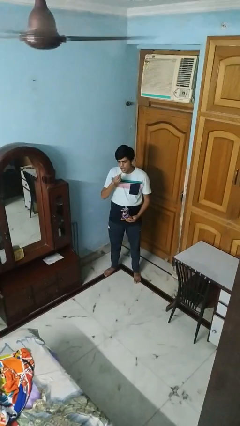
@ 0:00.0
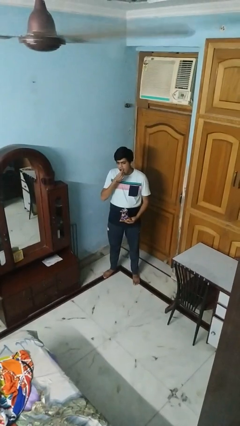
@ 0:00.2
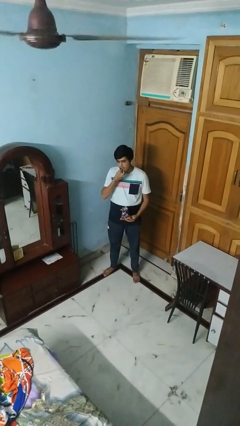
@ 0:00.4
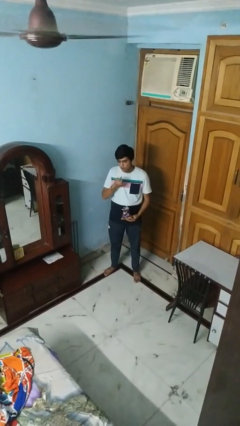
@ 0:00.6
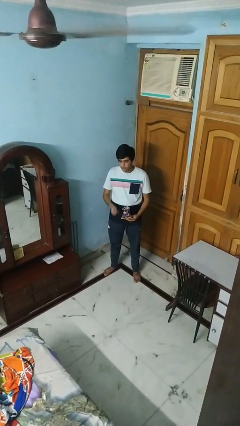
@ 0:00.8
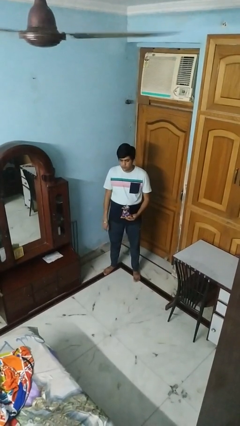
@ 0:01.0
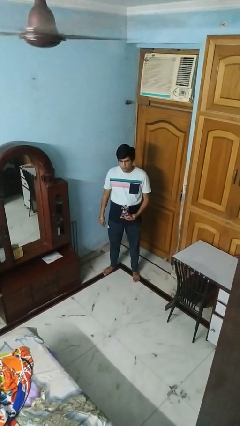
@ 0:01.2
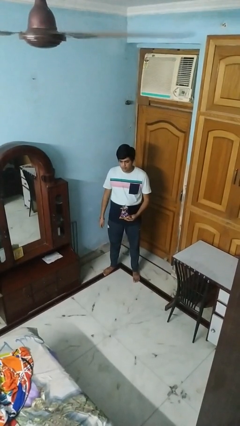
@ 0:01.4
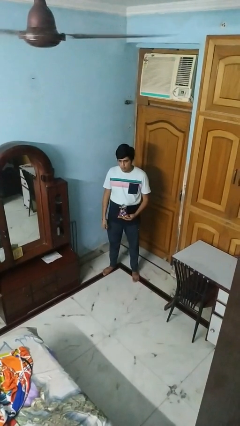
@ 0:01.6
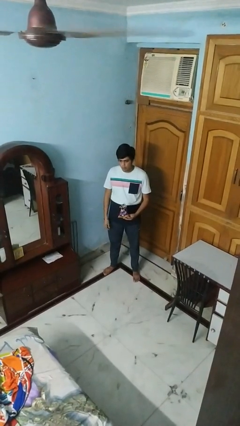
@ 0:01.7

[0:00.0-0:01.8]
person eats snack from bag

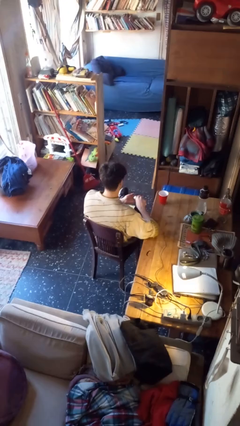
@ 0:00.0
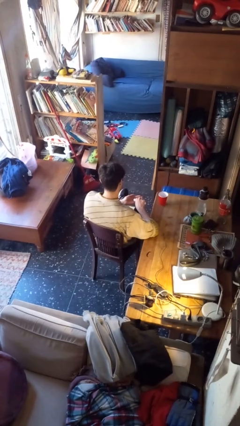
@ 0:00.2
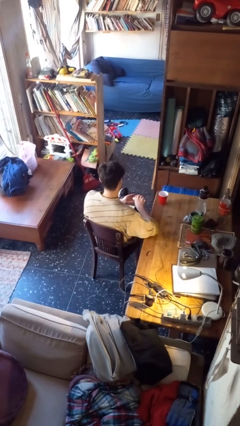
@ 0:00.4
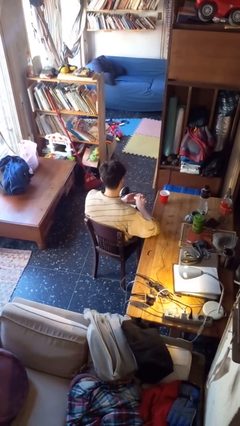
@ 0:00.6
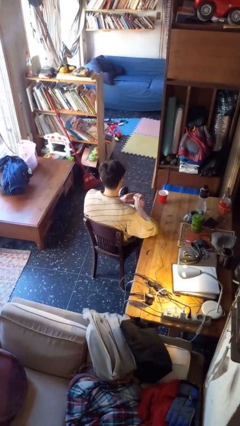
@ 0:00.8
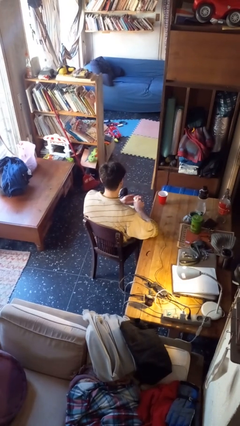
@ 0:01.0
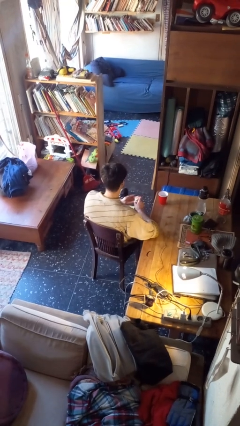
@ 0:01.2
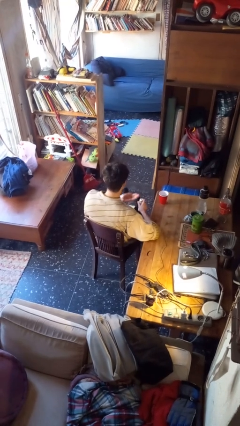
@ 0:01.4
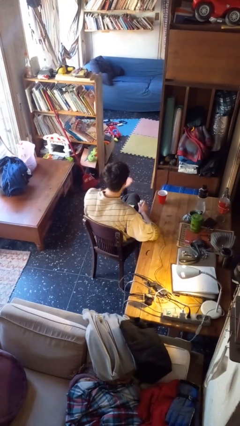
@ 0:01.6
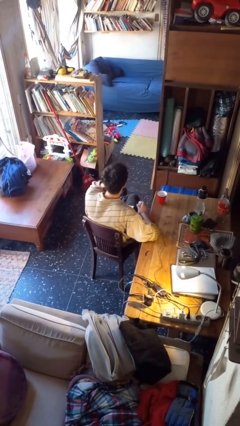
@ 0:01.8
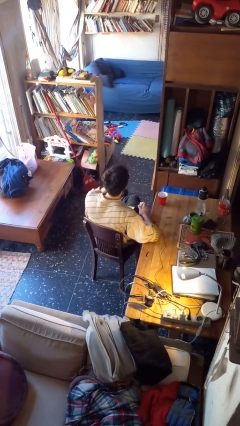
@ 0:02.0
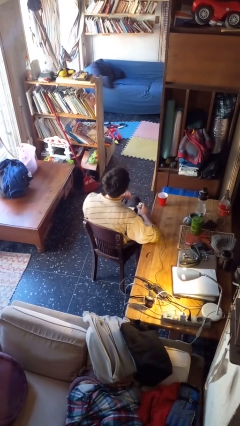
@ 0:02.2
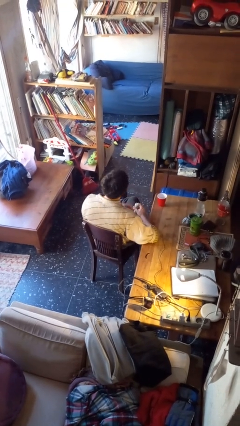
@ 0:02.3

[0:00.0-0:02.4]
person takes medicine pills

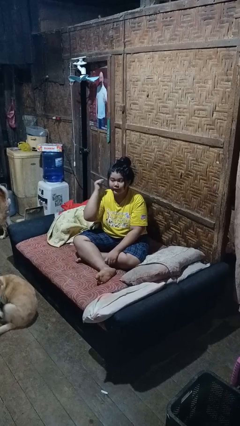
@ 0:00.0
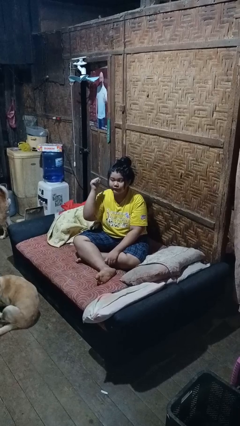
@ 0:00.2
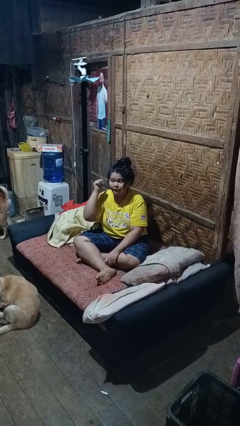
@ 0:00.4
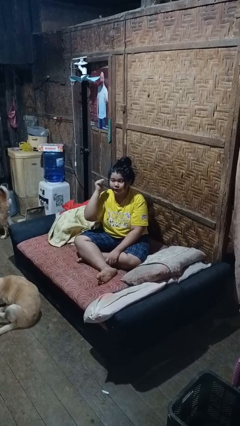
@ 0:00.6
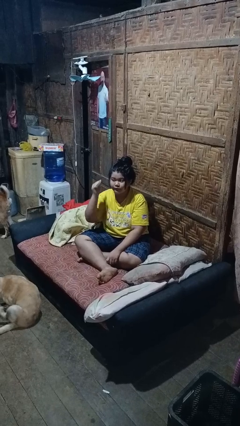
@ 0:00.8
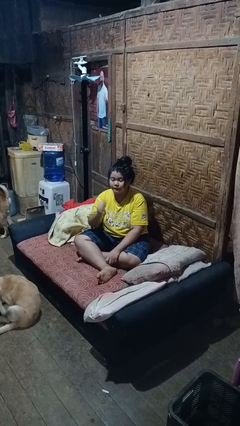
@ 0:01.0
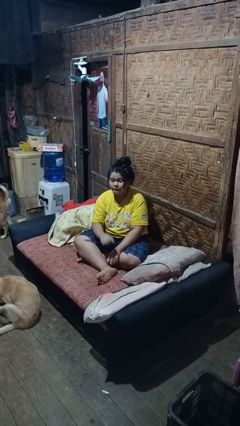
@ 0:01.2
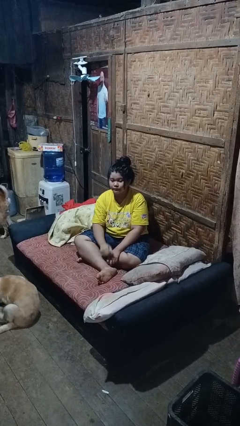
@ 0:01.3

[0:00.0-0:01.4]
person gestures behind me

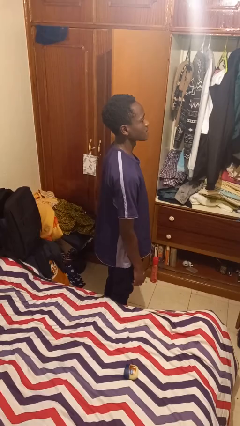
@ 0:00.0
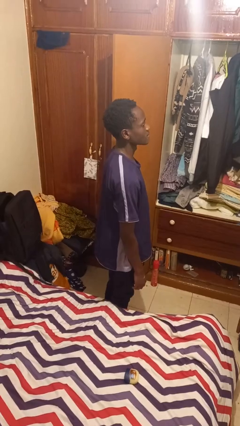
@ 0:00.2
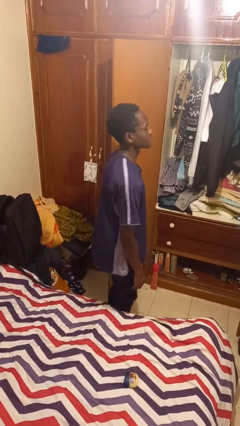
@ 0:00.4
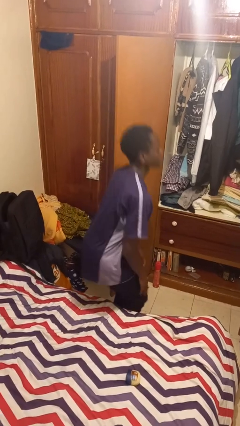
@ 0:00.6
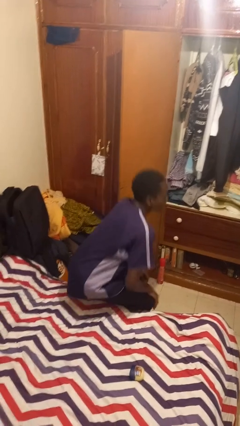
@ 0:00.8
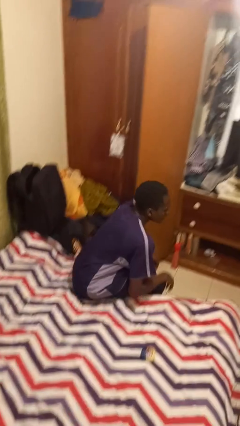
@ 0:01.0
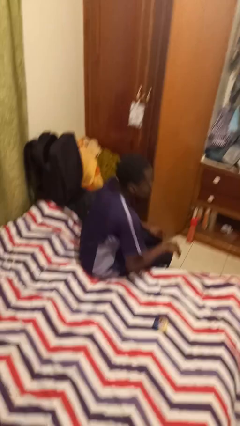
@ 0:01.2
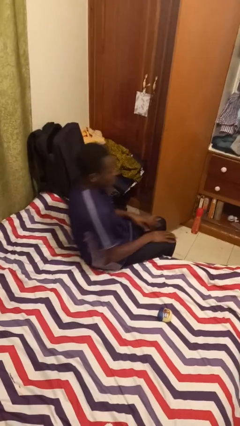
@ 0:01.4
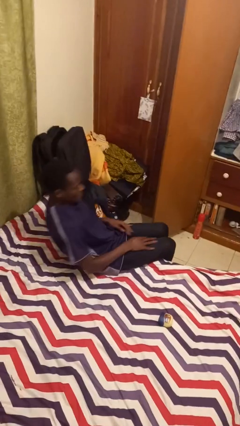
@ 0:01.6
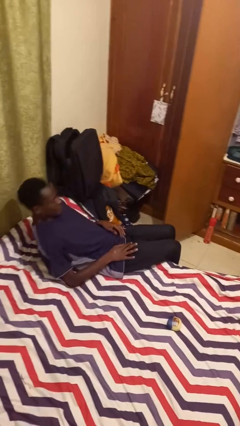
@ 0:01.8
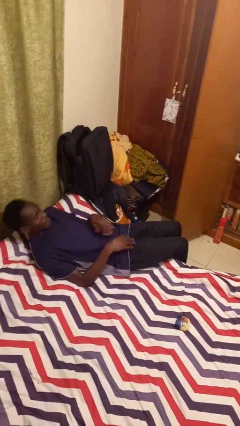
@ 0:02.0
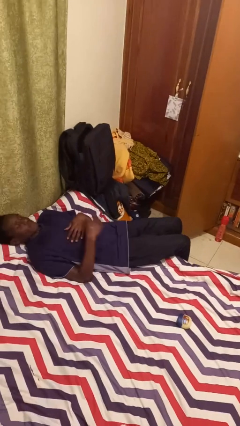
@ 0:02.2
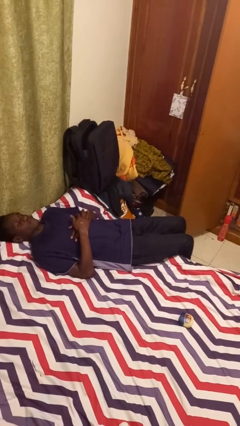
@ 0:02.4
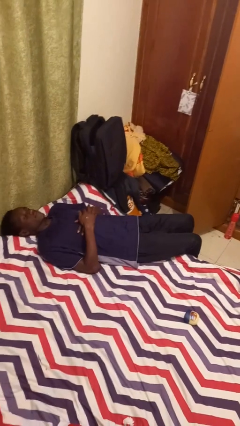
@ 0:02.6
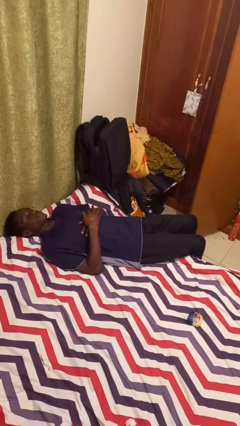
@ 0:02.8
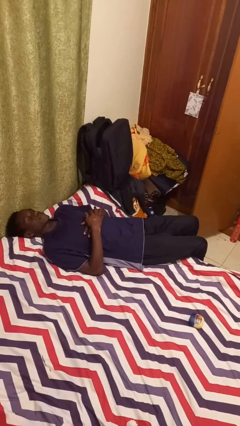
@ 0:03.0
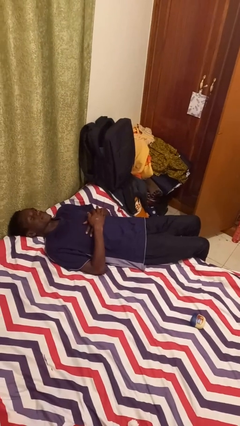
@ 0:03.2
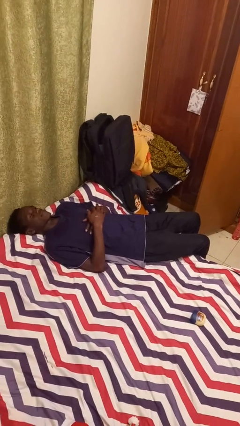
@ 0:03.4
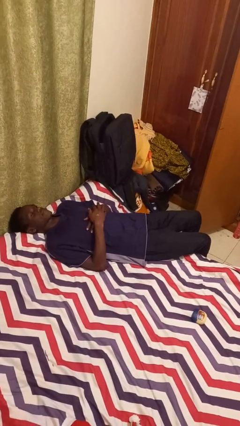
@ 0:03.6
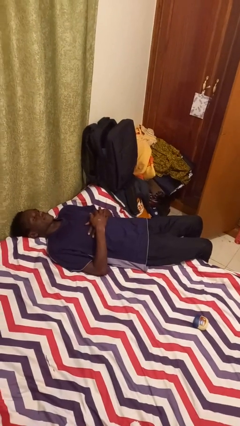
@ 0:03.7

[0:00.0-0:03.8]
person lies down on bed

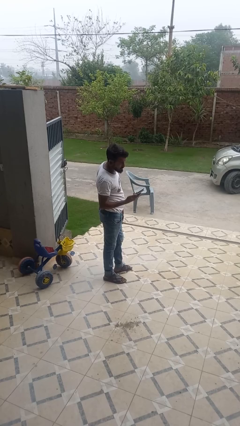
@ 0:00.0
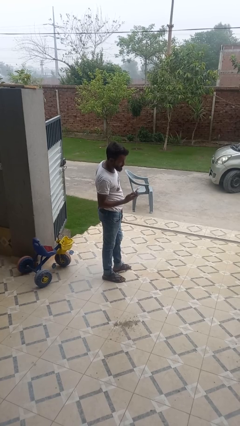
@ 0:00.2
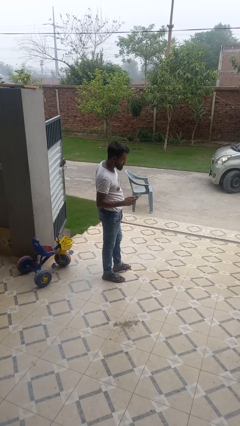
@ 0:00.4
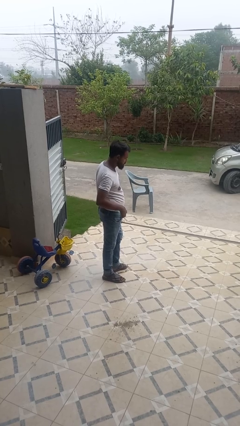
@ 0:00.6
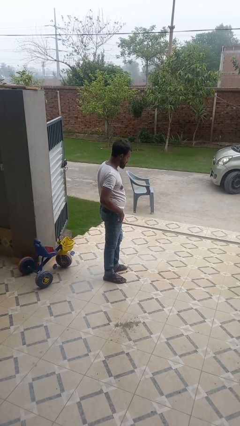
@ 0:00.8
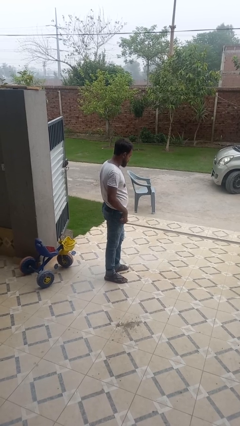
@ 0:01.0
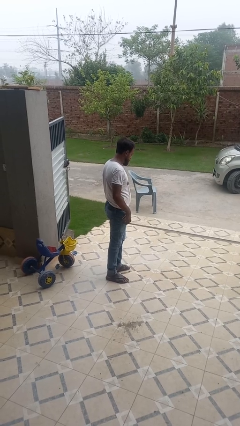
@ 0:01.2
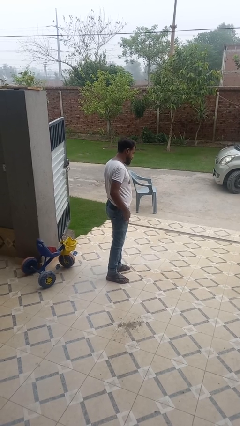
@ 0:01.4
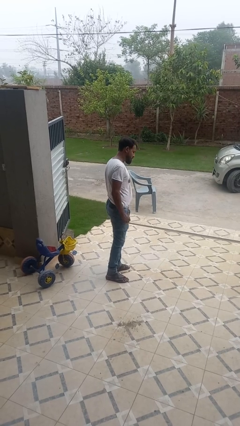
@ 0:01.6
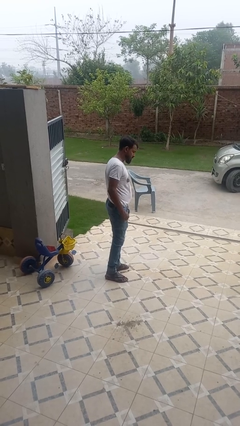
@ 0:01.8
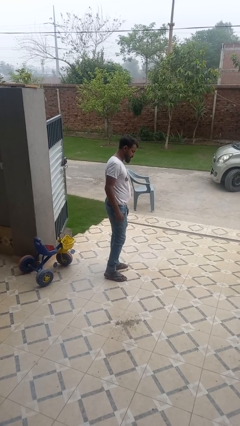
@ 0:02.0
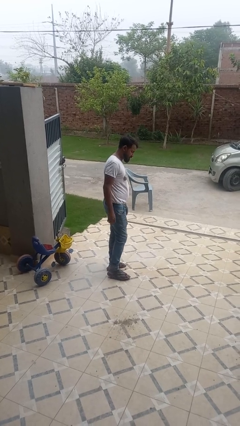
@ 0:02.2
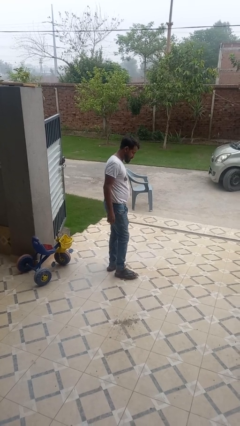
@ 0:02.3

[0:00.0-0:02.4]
person puts phone into pocket

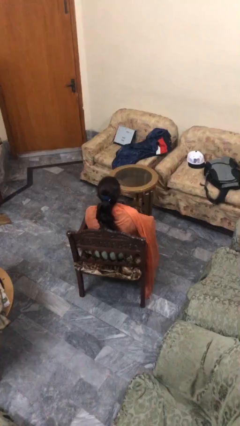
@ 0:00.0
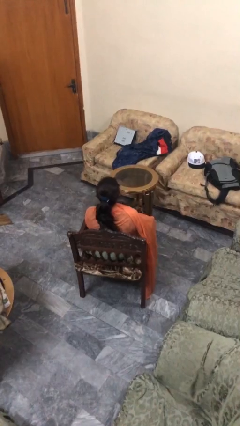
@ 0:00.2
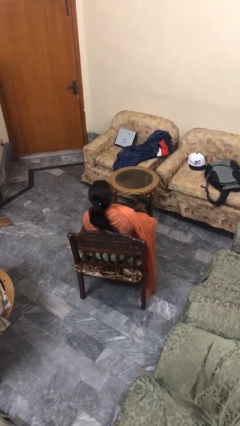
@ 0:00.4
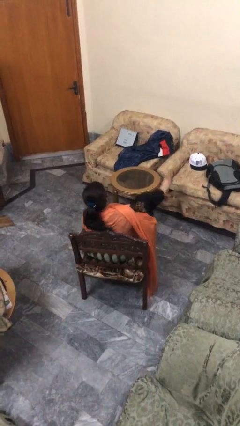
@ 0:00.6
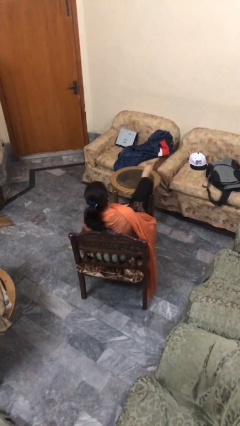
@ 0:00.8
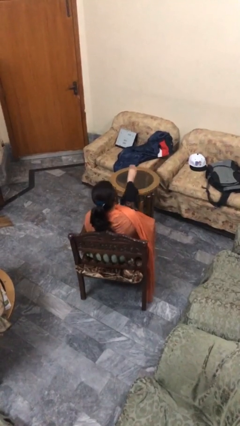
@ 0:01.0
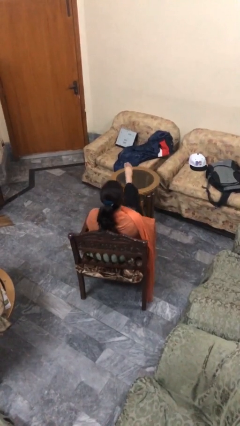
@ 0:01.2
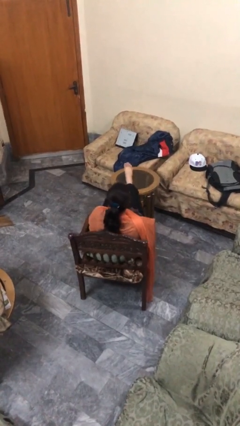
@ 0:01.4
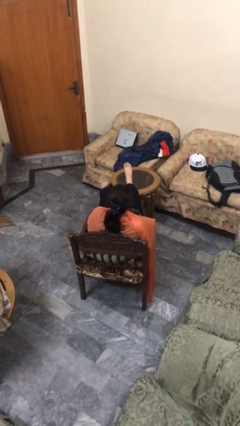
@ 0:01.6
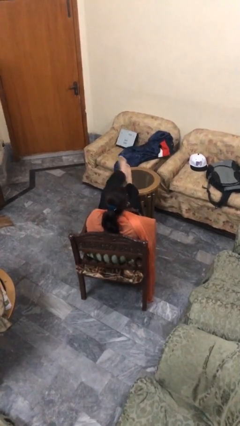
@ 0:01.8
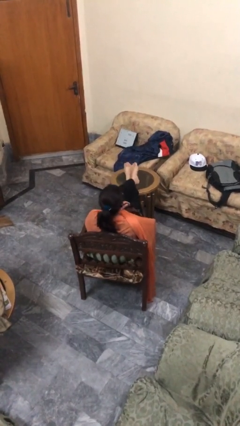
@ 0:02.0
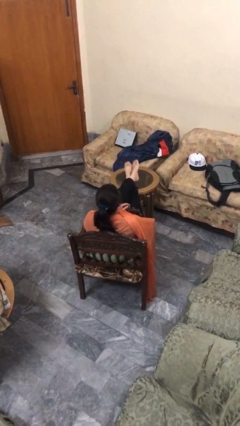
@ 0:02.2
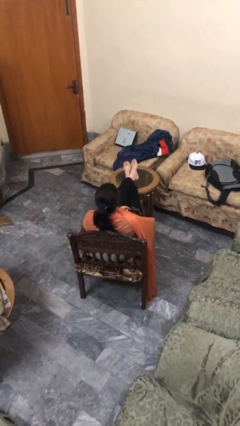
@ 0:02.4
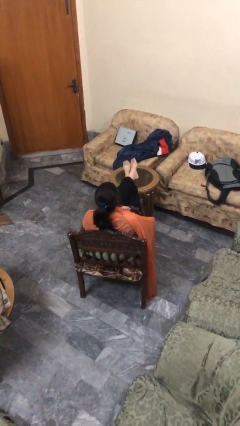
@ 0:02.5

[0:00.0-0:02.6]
person puts feet up

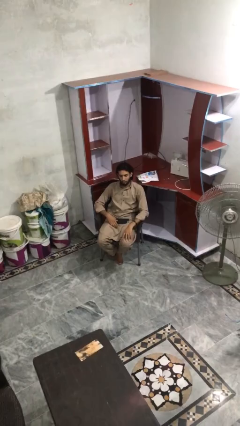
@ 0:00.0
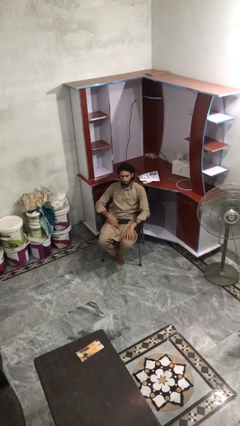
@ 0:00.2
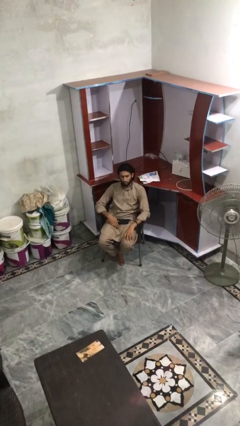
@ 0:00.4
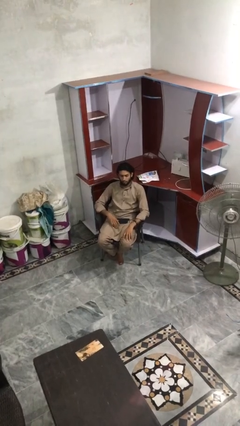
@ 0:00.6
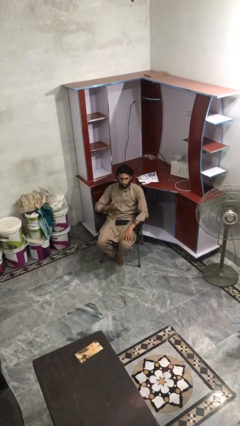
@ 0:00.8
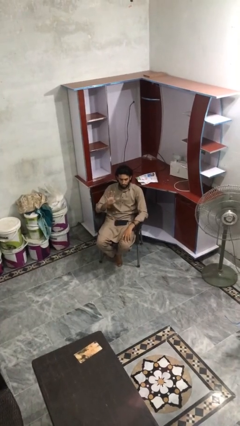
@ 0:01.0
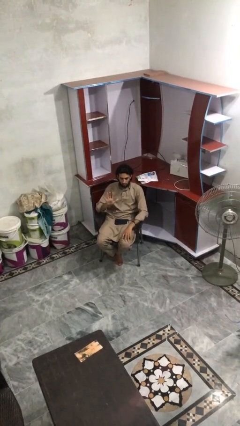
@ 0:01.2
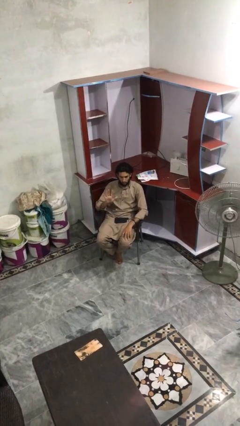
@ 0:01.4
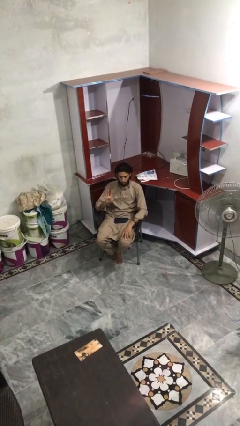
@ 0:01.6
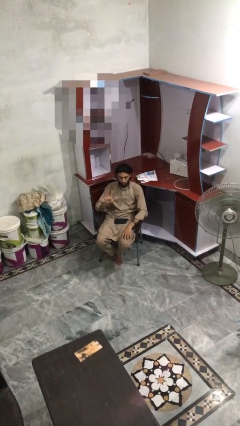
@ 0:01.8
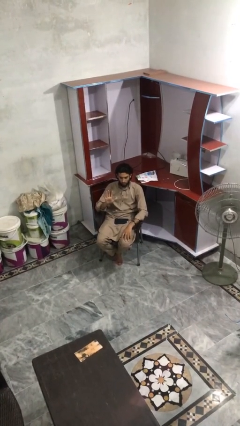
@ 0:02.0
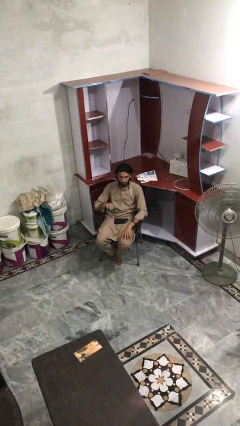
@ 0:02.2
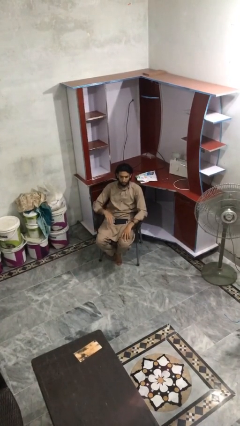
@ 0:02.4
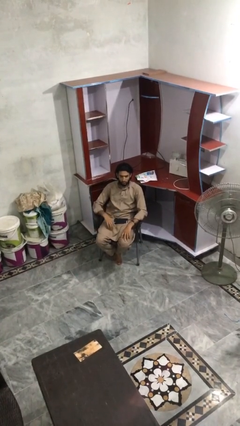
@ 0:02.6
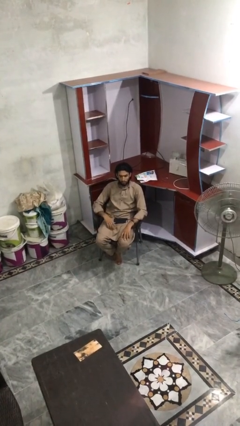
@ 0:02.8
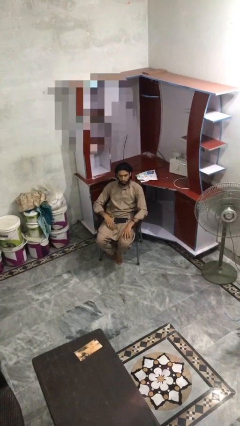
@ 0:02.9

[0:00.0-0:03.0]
person gestures number five
